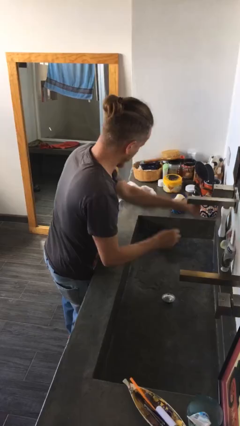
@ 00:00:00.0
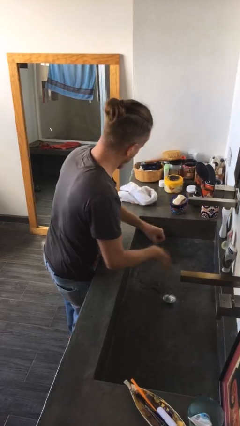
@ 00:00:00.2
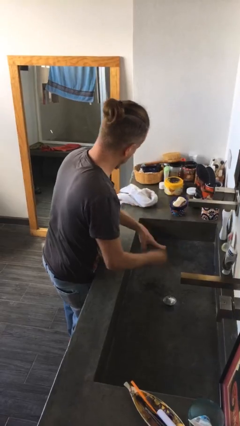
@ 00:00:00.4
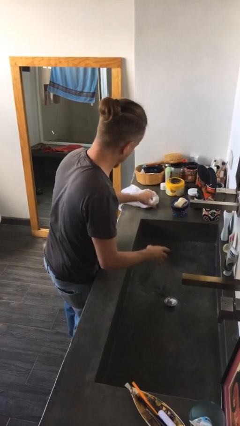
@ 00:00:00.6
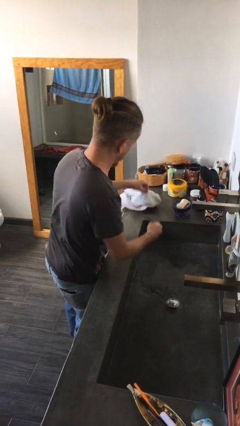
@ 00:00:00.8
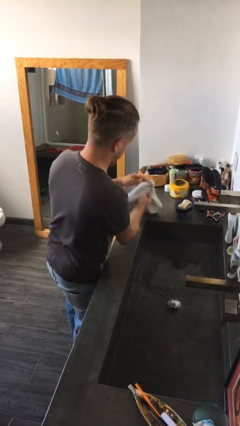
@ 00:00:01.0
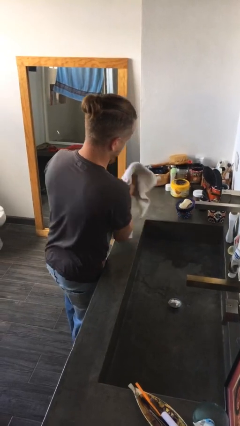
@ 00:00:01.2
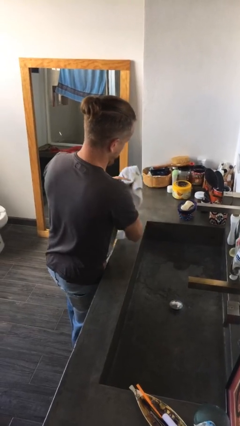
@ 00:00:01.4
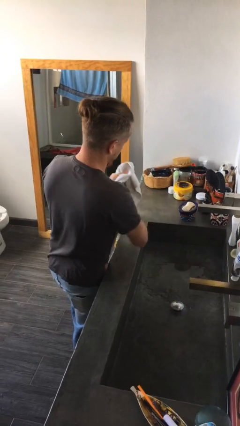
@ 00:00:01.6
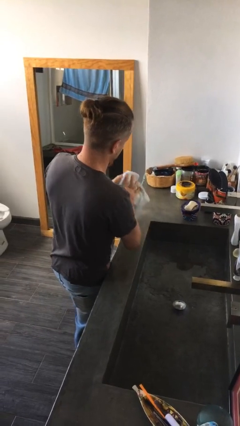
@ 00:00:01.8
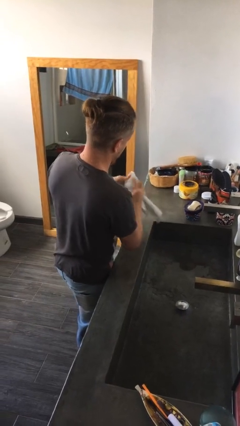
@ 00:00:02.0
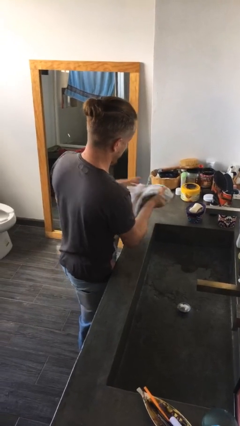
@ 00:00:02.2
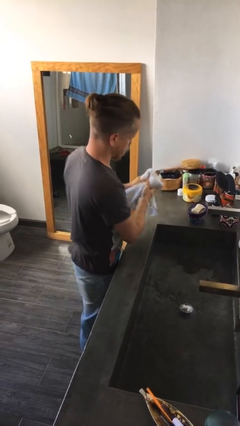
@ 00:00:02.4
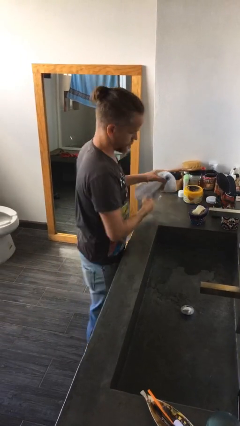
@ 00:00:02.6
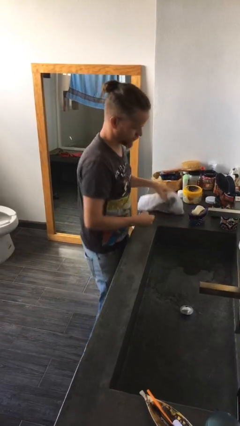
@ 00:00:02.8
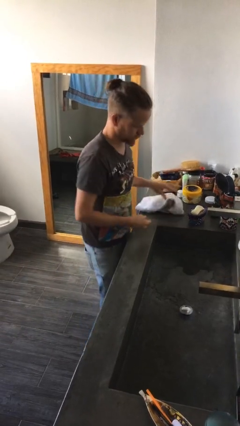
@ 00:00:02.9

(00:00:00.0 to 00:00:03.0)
person dries hands with towel

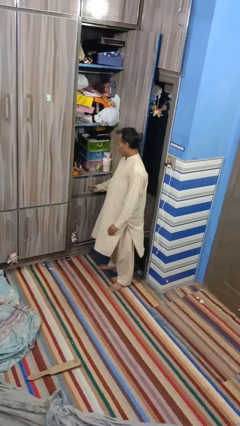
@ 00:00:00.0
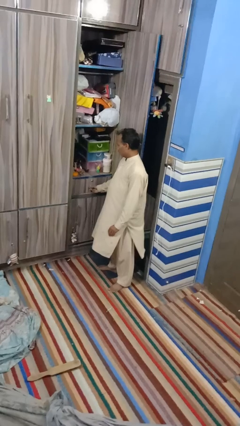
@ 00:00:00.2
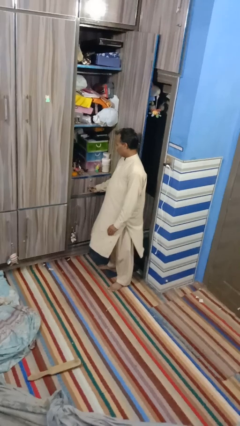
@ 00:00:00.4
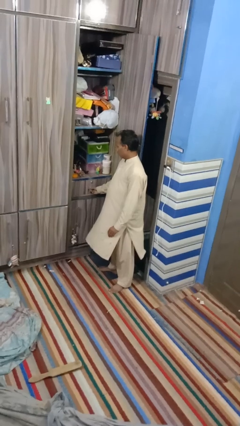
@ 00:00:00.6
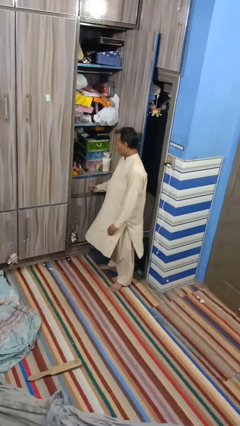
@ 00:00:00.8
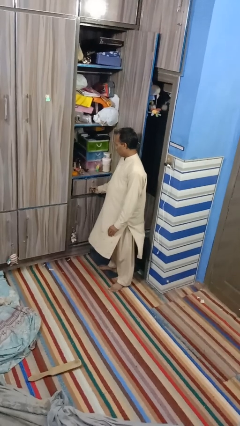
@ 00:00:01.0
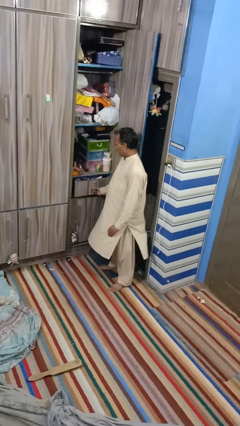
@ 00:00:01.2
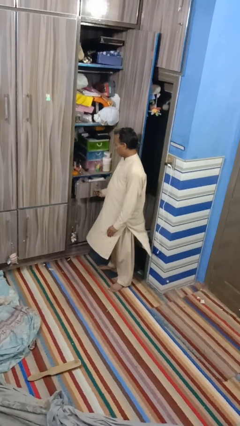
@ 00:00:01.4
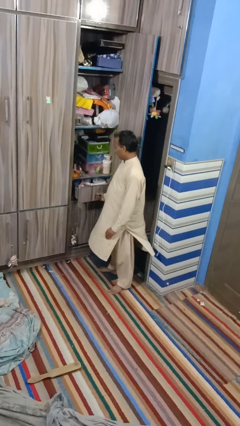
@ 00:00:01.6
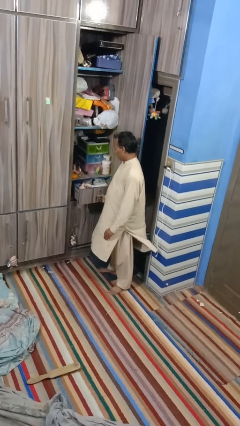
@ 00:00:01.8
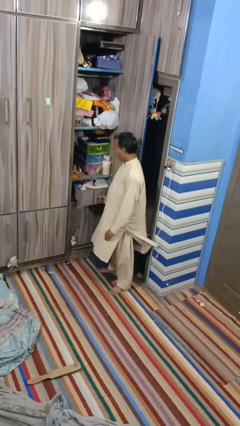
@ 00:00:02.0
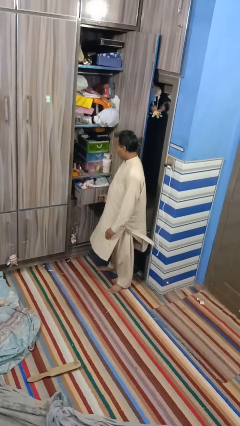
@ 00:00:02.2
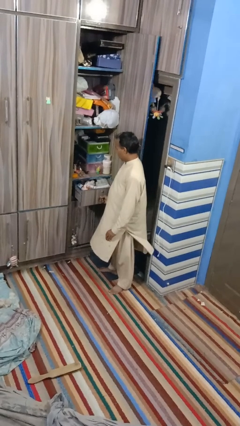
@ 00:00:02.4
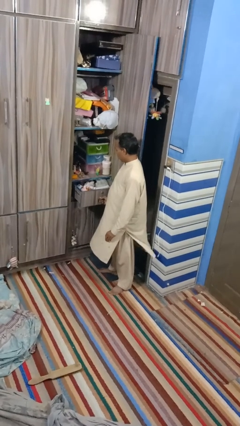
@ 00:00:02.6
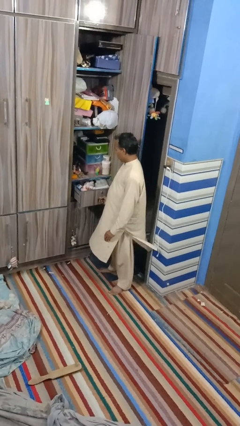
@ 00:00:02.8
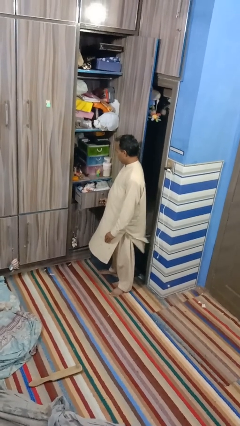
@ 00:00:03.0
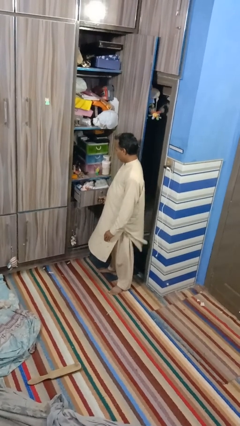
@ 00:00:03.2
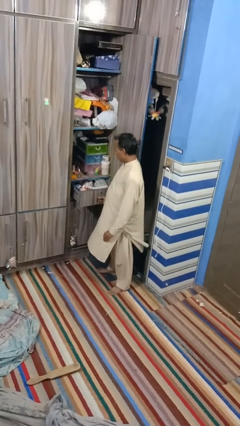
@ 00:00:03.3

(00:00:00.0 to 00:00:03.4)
person opens dresser drawer

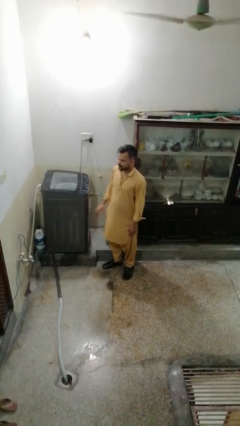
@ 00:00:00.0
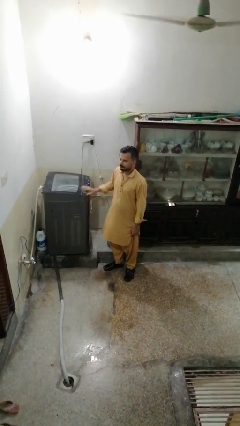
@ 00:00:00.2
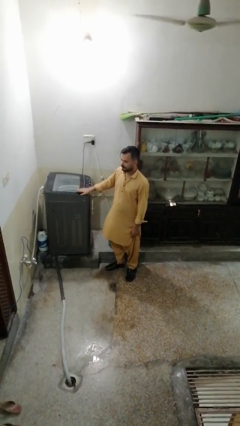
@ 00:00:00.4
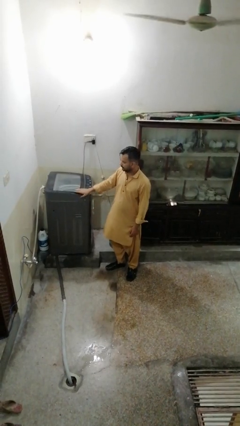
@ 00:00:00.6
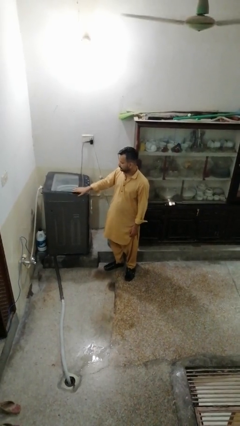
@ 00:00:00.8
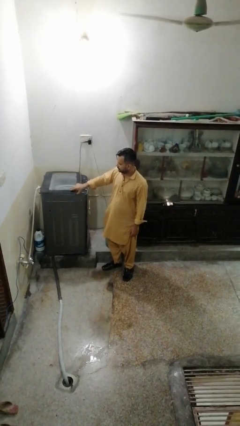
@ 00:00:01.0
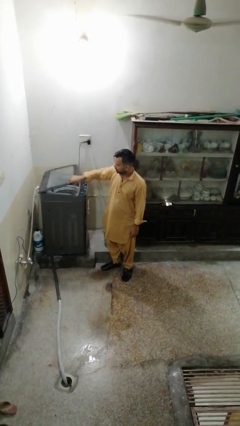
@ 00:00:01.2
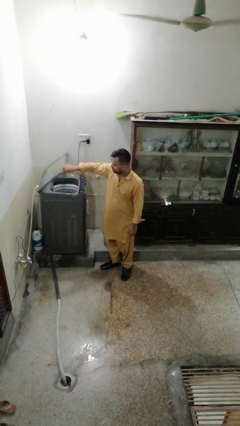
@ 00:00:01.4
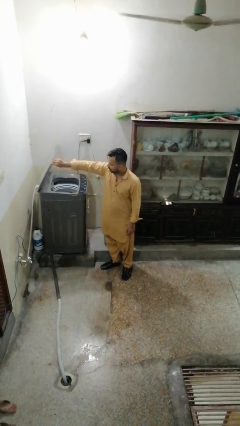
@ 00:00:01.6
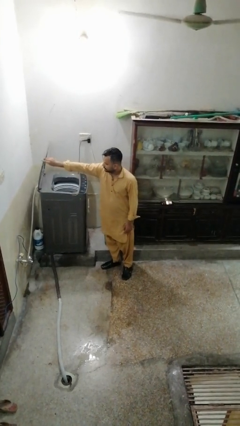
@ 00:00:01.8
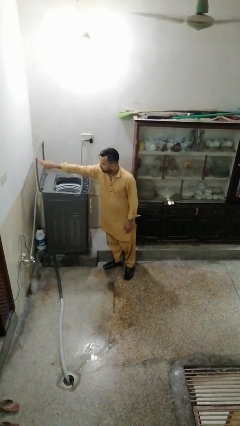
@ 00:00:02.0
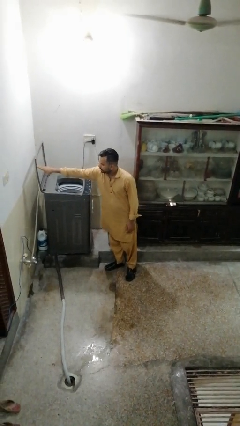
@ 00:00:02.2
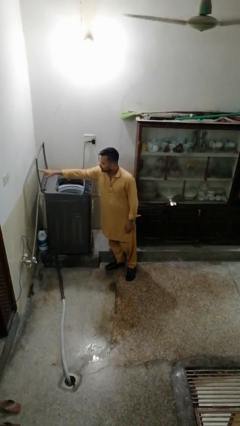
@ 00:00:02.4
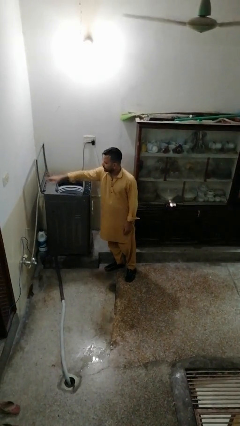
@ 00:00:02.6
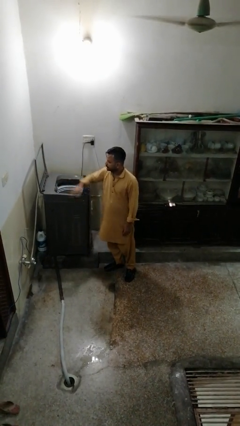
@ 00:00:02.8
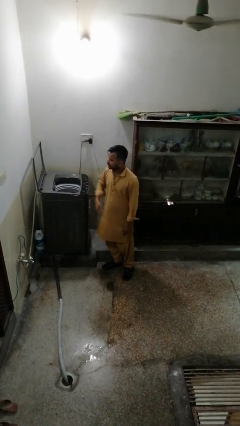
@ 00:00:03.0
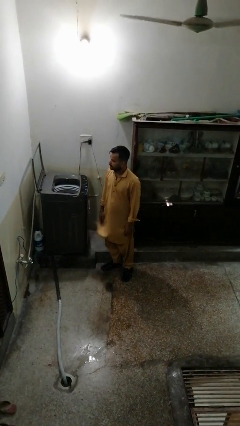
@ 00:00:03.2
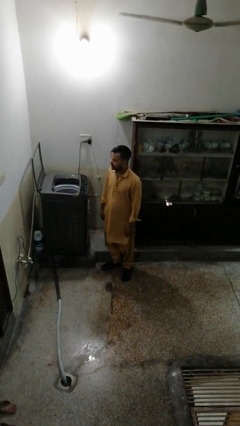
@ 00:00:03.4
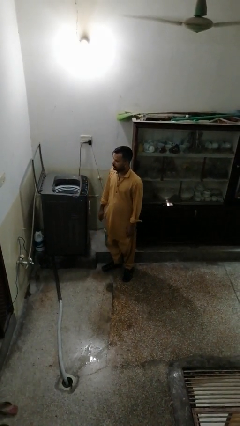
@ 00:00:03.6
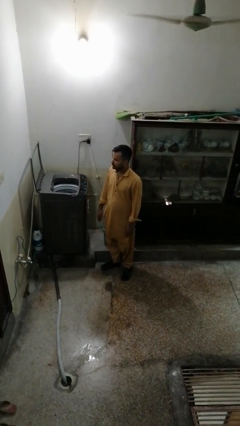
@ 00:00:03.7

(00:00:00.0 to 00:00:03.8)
person opens clothes washer

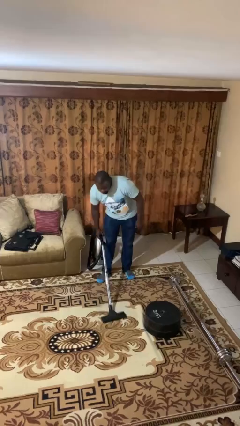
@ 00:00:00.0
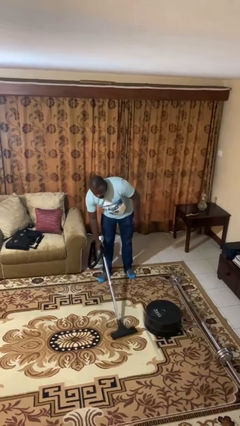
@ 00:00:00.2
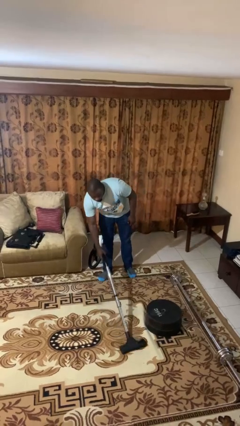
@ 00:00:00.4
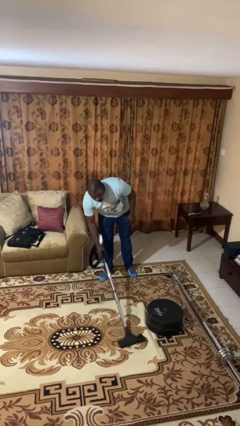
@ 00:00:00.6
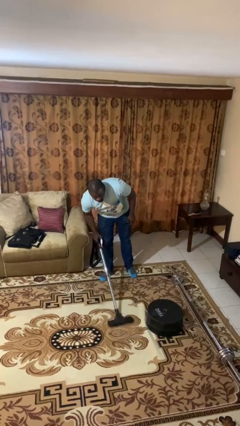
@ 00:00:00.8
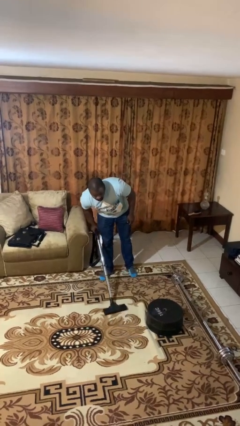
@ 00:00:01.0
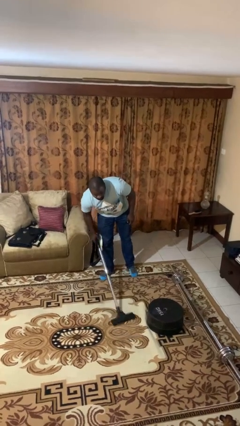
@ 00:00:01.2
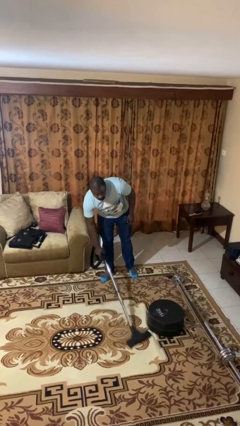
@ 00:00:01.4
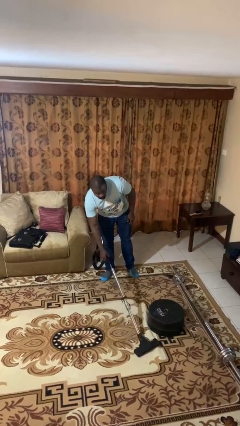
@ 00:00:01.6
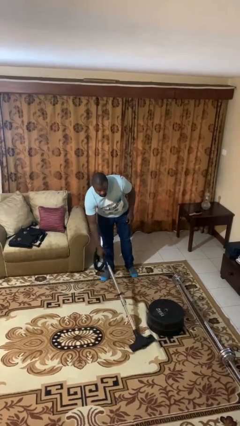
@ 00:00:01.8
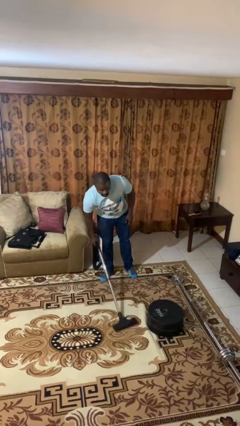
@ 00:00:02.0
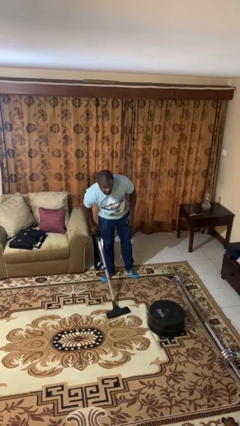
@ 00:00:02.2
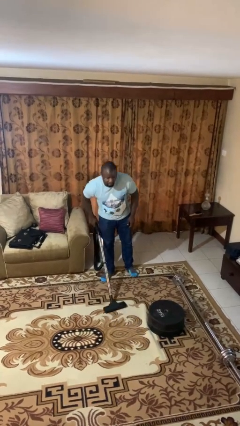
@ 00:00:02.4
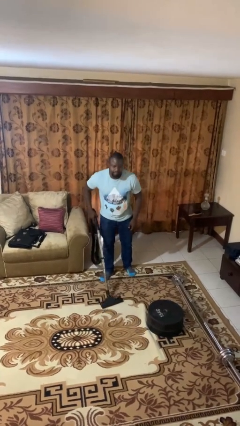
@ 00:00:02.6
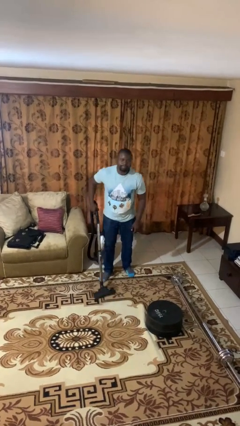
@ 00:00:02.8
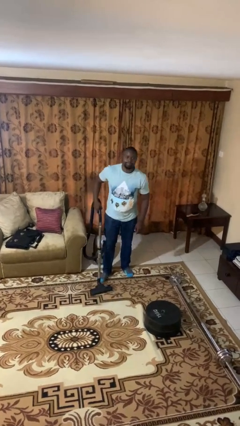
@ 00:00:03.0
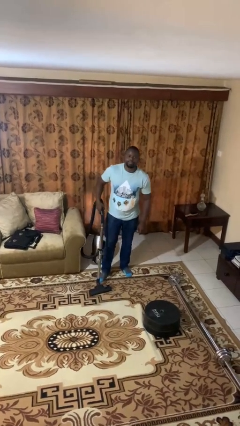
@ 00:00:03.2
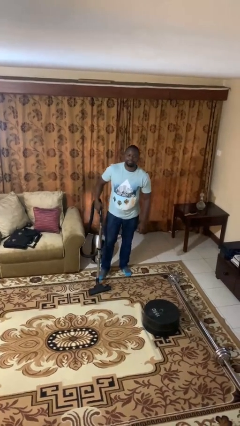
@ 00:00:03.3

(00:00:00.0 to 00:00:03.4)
person vacuums carpet

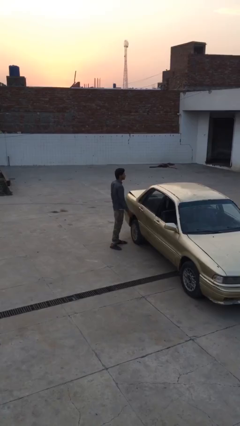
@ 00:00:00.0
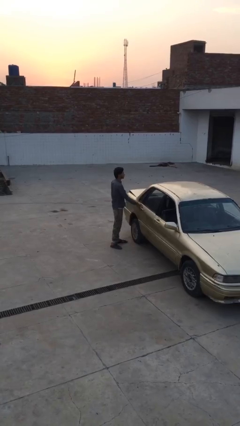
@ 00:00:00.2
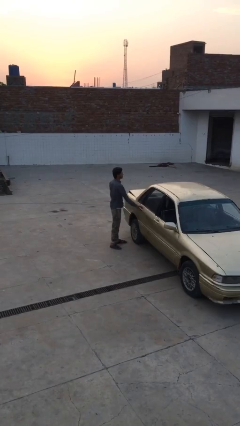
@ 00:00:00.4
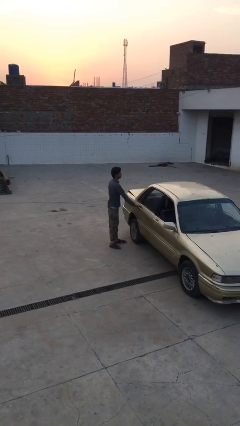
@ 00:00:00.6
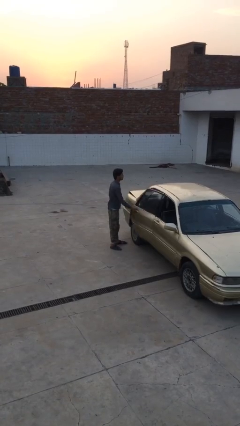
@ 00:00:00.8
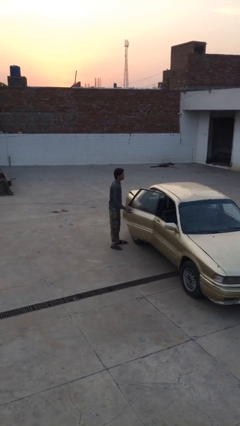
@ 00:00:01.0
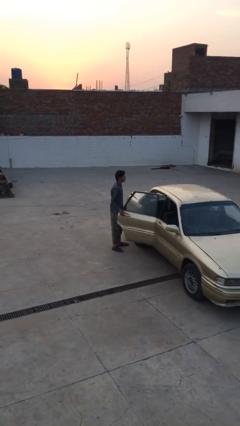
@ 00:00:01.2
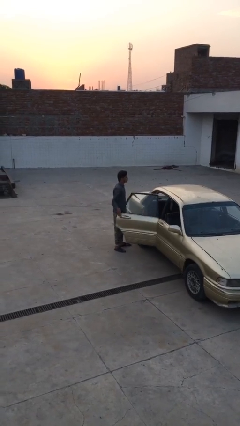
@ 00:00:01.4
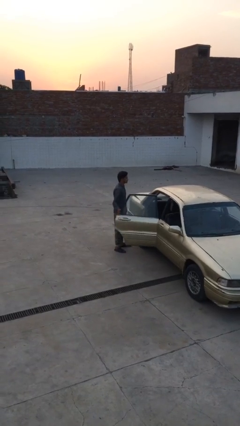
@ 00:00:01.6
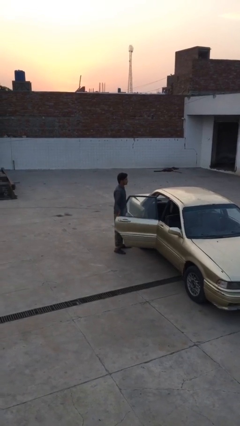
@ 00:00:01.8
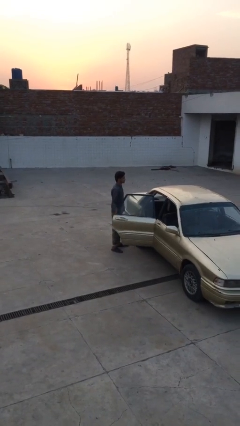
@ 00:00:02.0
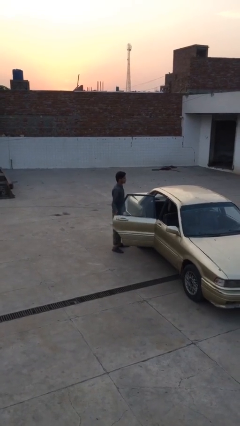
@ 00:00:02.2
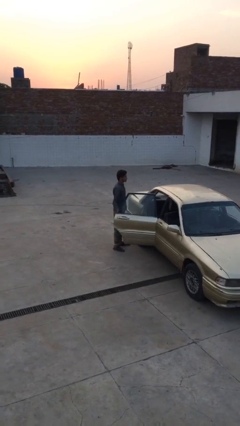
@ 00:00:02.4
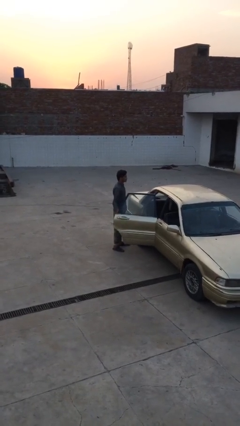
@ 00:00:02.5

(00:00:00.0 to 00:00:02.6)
person opens car door

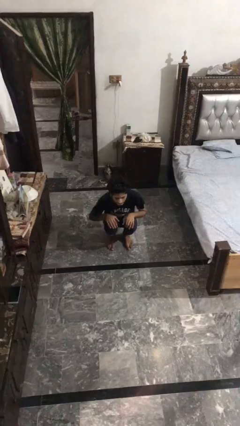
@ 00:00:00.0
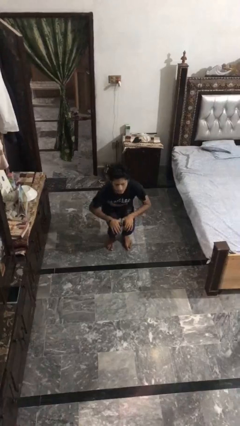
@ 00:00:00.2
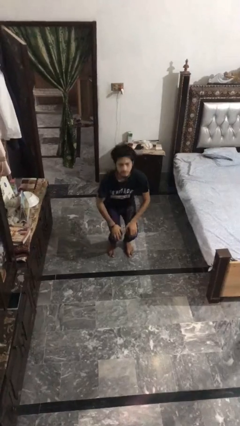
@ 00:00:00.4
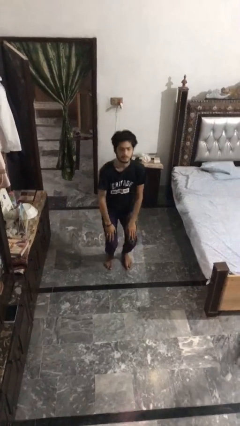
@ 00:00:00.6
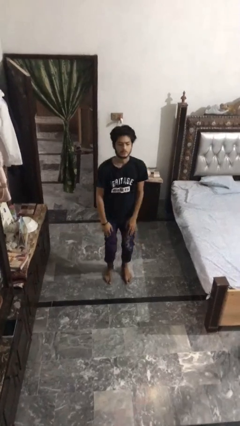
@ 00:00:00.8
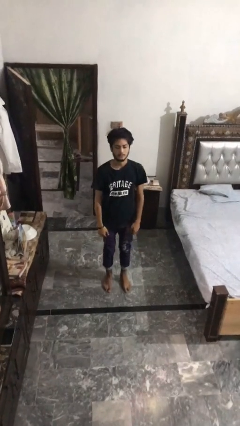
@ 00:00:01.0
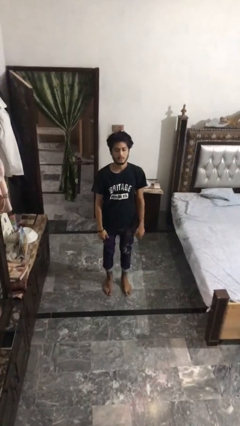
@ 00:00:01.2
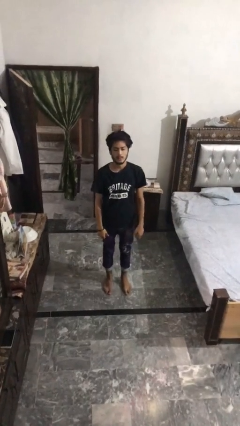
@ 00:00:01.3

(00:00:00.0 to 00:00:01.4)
person stands up
